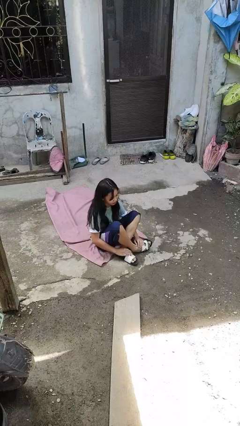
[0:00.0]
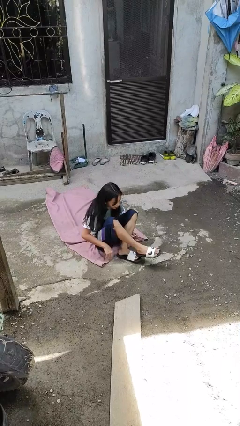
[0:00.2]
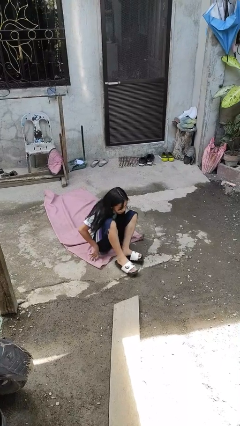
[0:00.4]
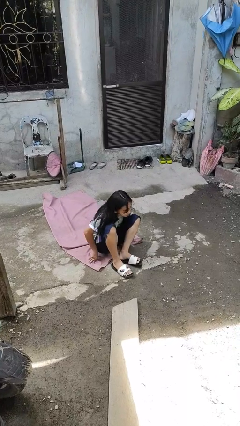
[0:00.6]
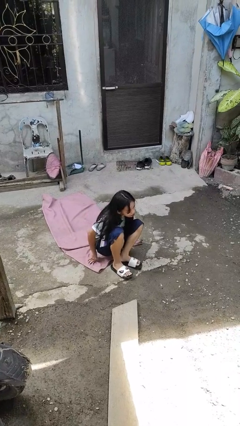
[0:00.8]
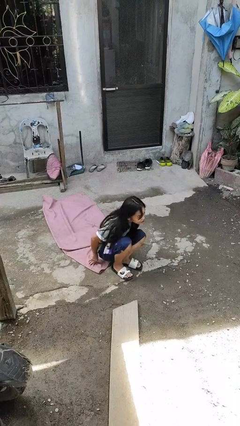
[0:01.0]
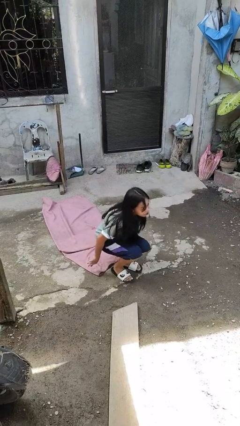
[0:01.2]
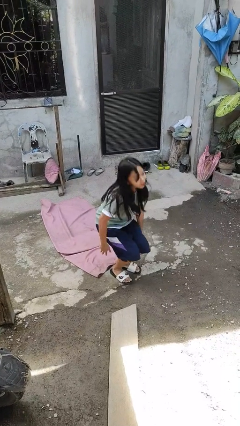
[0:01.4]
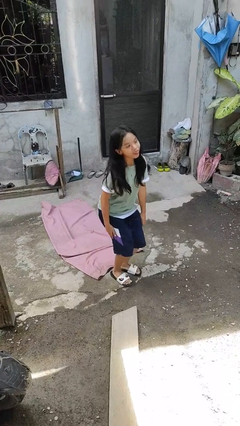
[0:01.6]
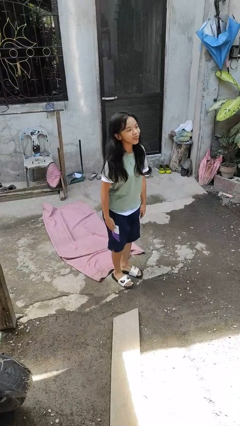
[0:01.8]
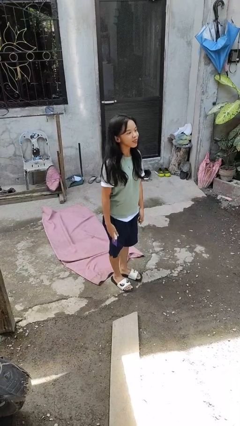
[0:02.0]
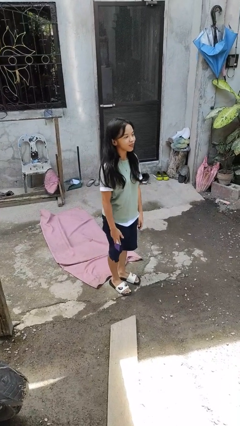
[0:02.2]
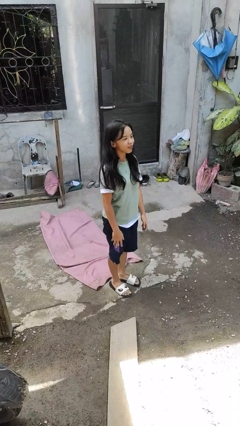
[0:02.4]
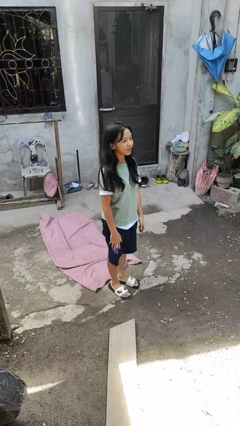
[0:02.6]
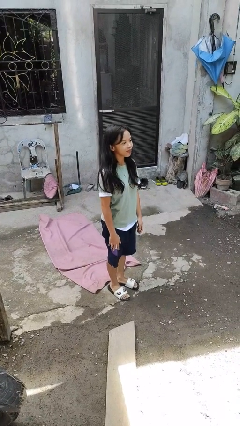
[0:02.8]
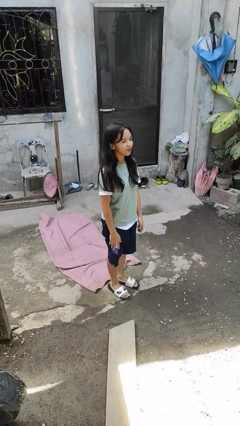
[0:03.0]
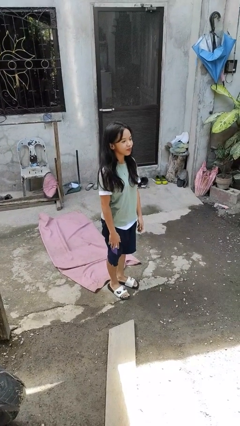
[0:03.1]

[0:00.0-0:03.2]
person stands up from floor

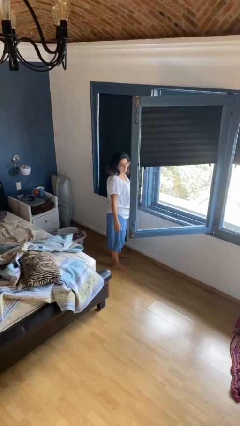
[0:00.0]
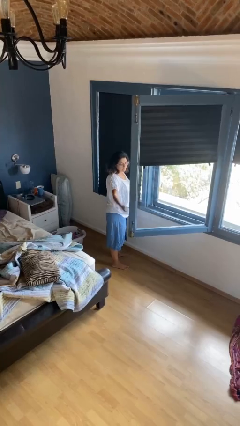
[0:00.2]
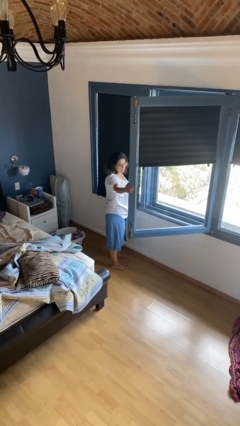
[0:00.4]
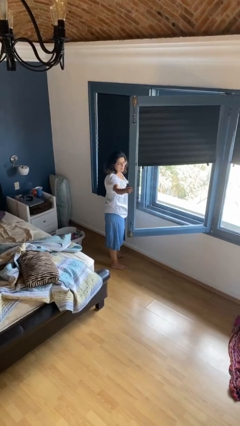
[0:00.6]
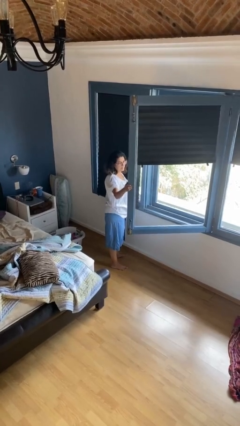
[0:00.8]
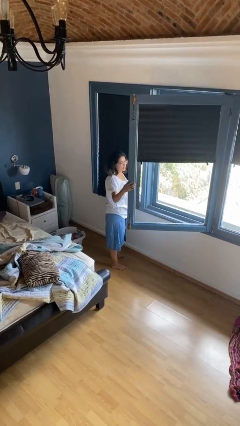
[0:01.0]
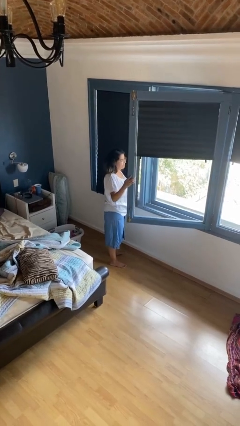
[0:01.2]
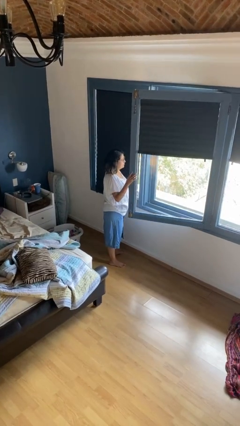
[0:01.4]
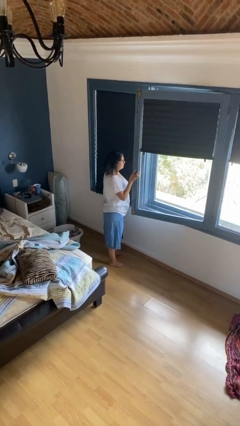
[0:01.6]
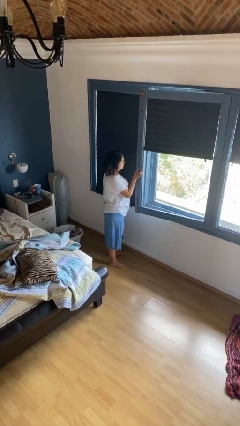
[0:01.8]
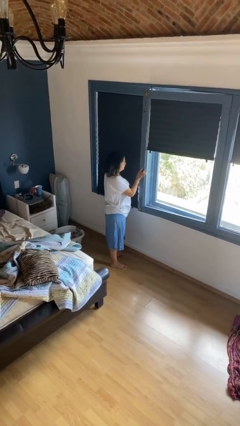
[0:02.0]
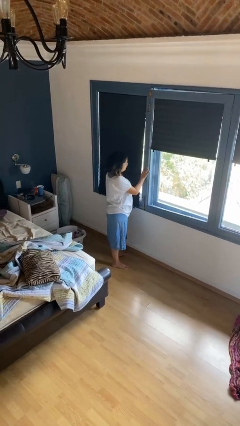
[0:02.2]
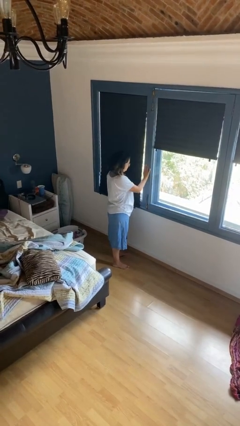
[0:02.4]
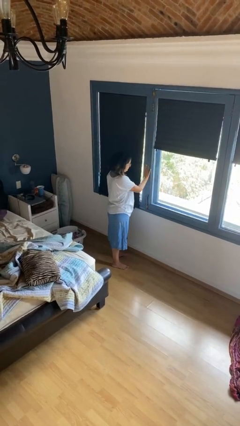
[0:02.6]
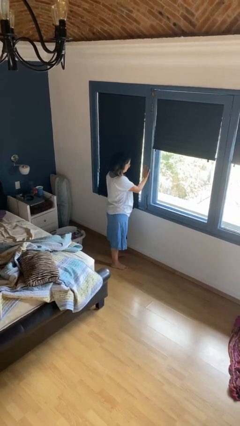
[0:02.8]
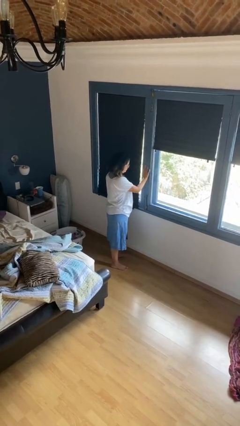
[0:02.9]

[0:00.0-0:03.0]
person closes home window

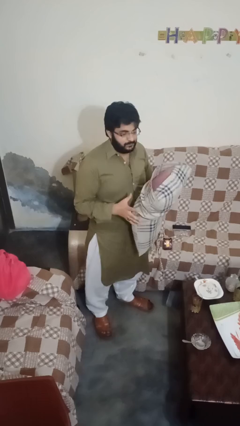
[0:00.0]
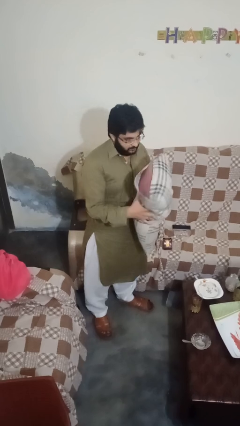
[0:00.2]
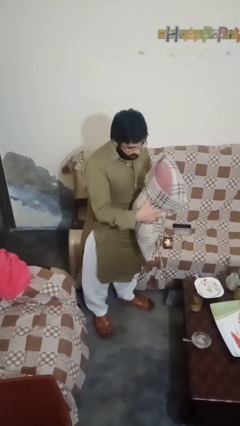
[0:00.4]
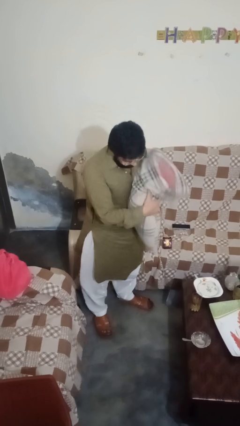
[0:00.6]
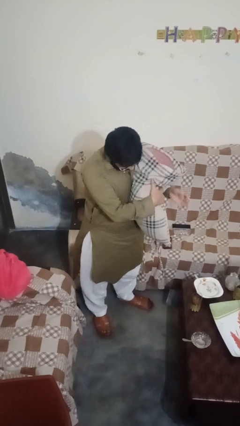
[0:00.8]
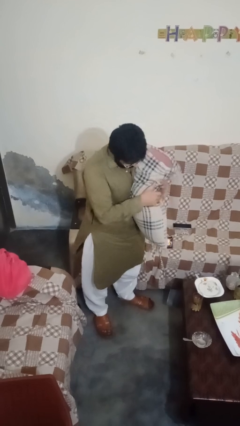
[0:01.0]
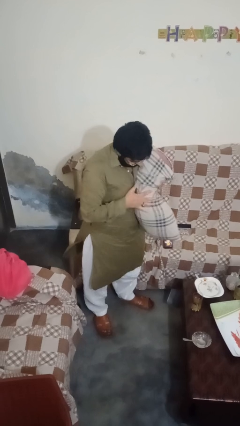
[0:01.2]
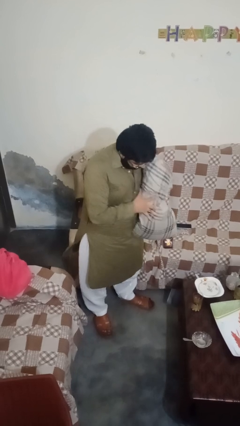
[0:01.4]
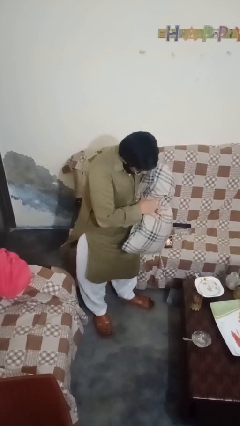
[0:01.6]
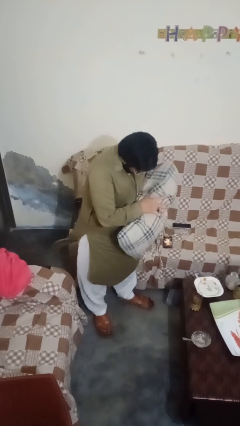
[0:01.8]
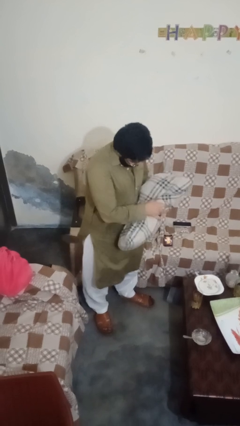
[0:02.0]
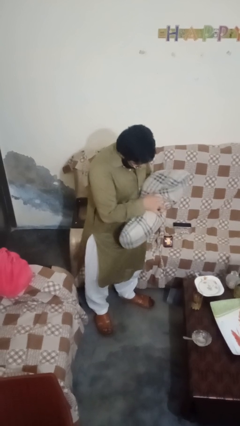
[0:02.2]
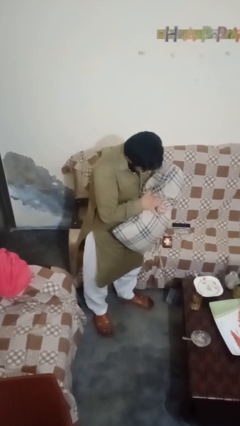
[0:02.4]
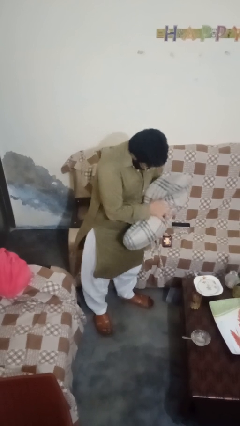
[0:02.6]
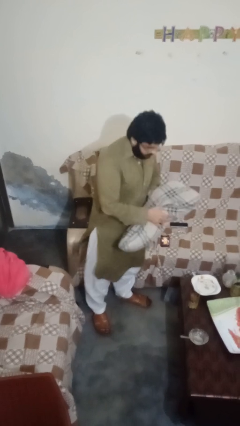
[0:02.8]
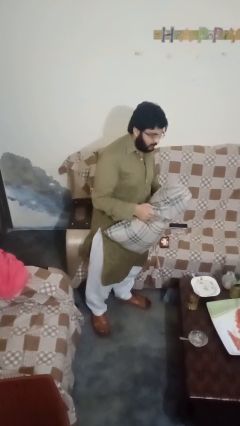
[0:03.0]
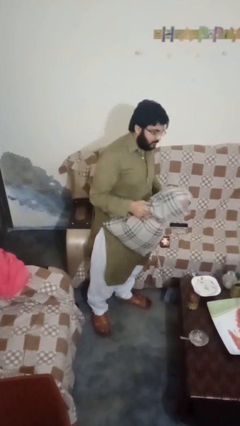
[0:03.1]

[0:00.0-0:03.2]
person squeezes object

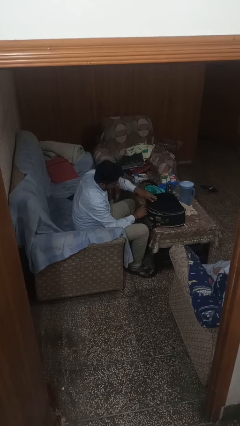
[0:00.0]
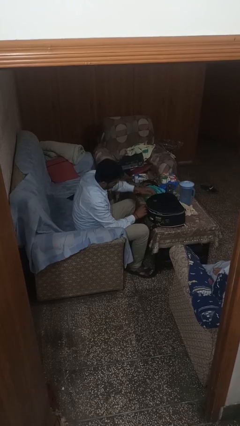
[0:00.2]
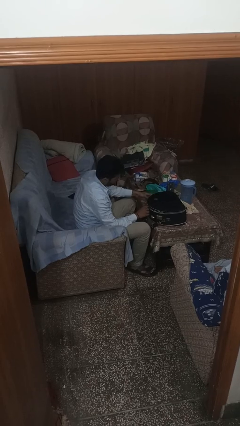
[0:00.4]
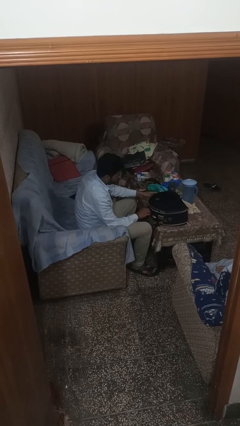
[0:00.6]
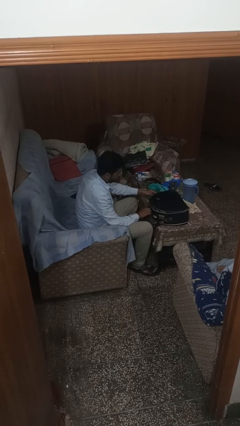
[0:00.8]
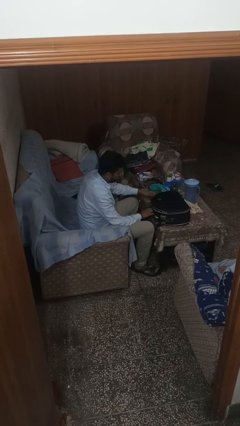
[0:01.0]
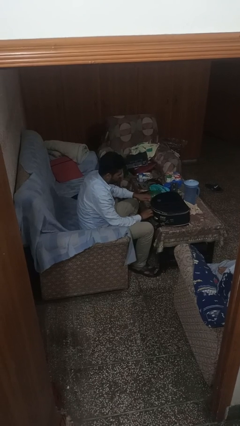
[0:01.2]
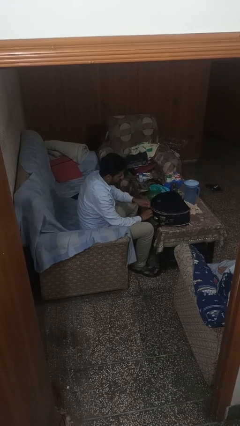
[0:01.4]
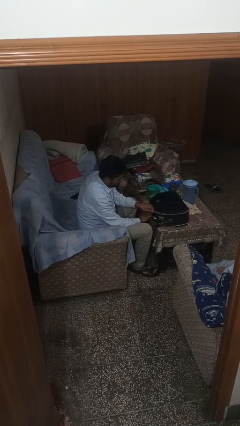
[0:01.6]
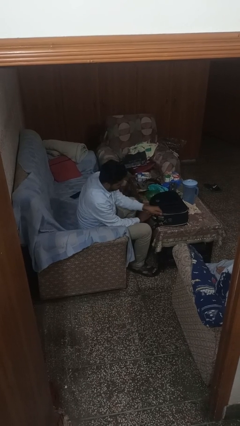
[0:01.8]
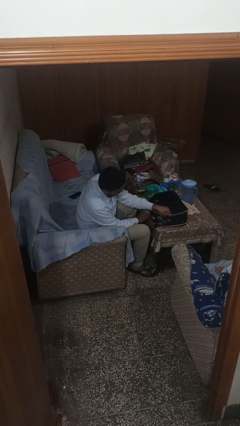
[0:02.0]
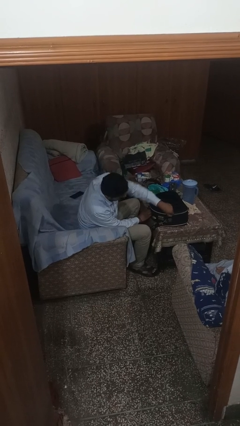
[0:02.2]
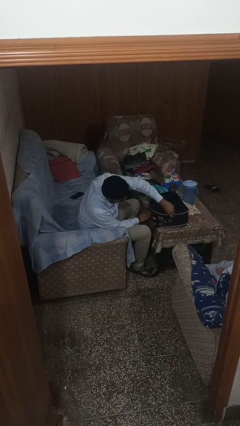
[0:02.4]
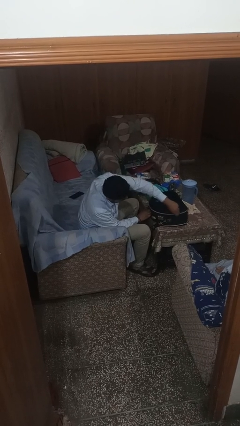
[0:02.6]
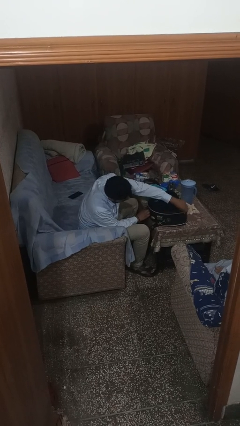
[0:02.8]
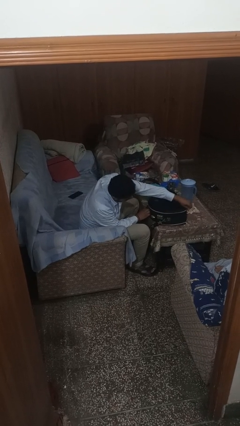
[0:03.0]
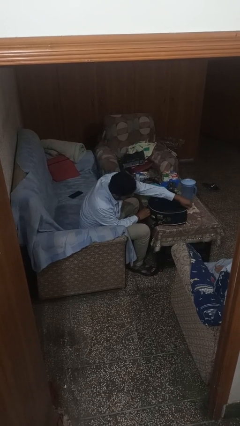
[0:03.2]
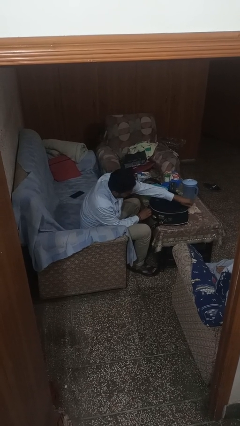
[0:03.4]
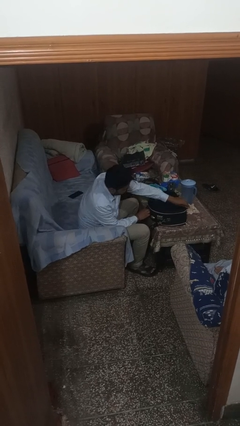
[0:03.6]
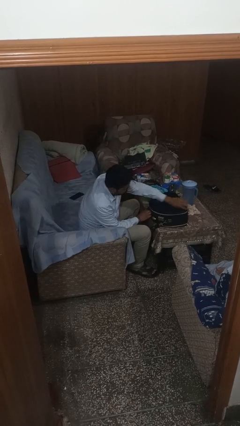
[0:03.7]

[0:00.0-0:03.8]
person closes suitcase

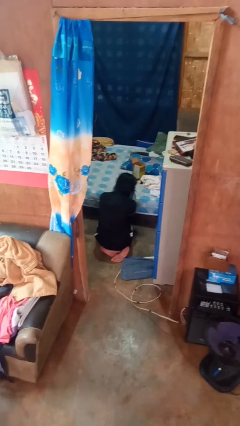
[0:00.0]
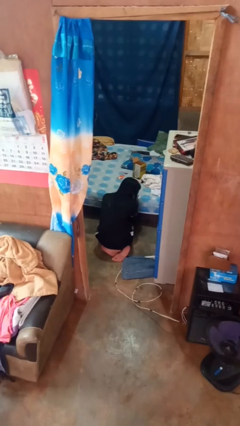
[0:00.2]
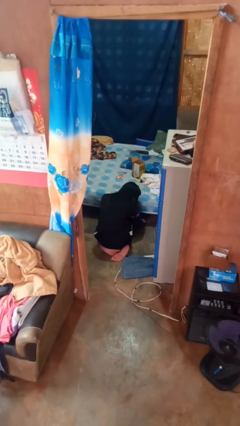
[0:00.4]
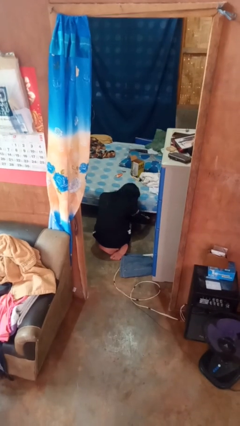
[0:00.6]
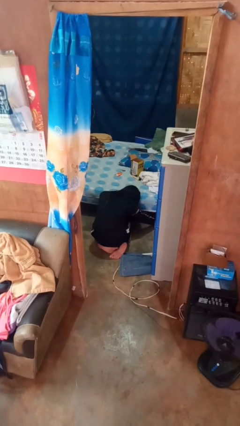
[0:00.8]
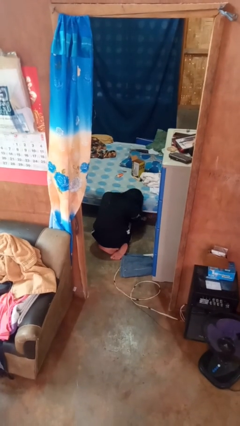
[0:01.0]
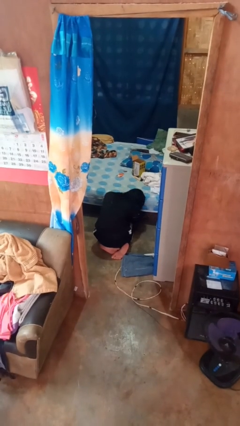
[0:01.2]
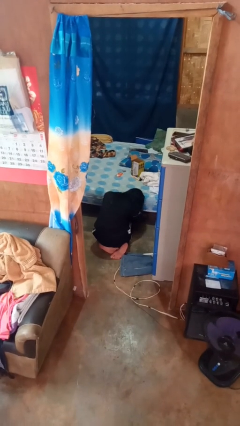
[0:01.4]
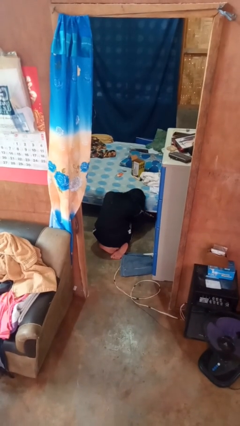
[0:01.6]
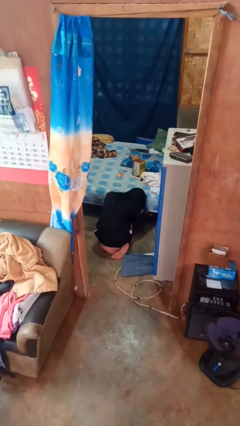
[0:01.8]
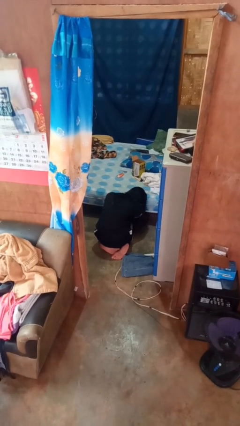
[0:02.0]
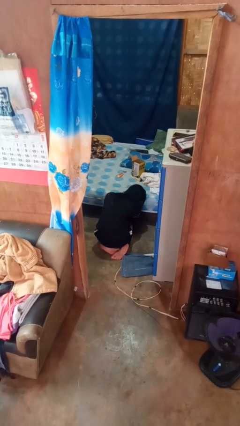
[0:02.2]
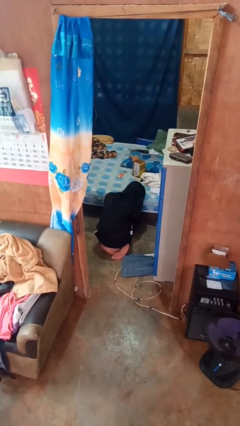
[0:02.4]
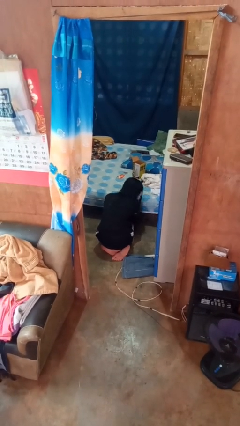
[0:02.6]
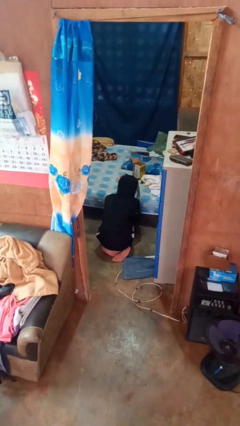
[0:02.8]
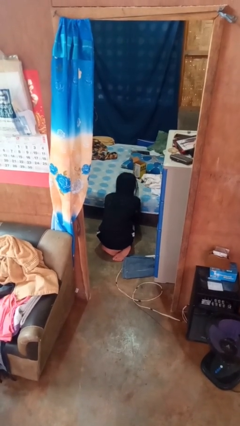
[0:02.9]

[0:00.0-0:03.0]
person searches under bed

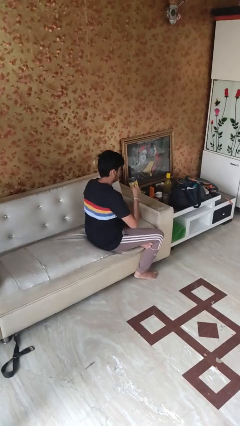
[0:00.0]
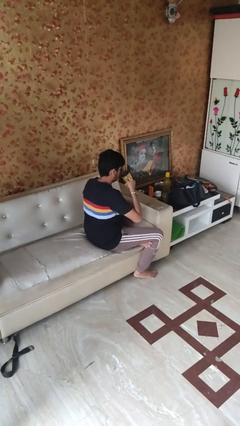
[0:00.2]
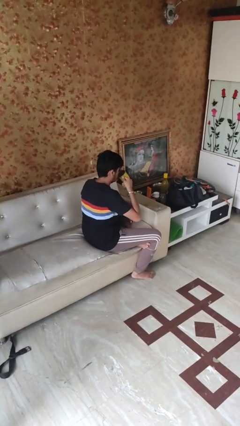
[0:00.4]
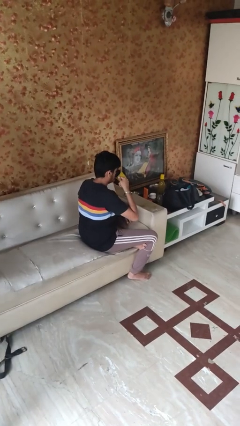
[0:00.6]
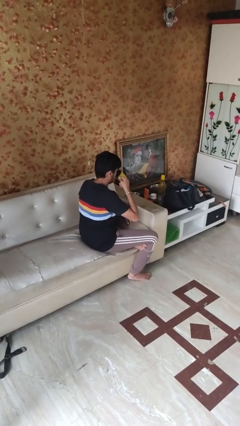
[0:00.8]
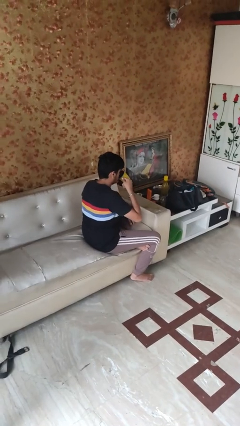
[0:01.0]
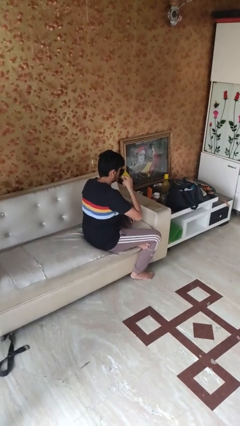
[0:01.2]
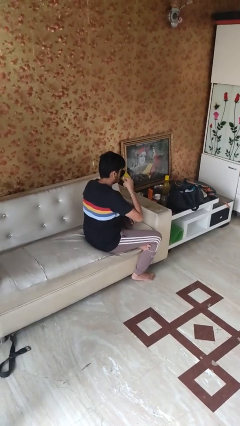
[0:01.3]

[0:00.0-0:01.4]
person drinks from mug
